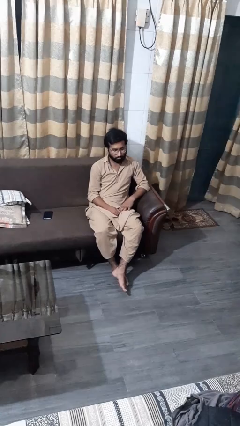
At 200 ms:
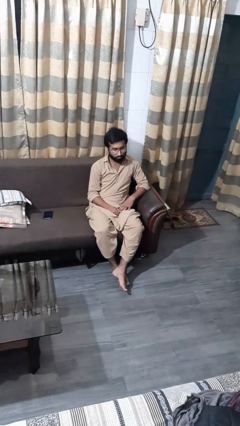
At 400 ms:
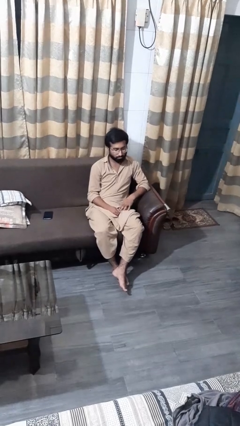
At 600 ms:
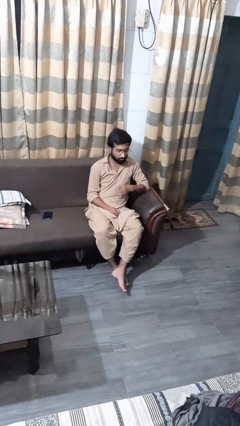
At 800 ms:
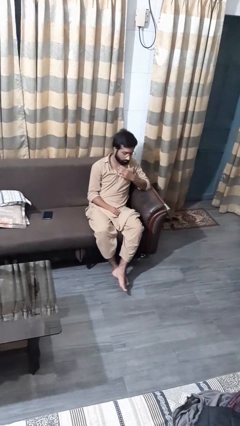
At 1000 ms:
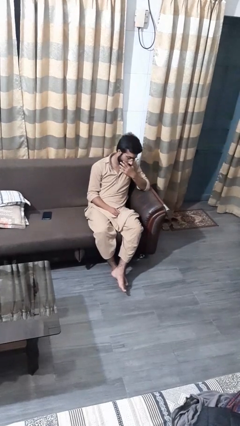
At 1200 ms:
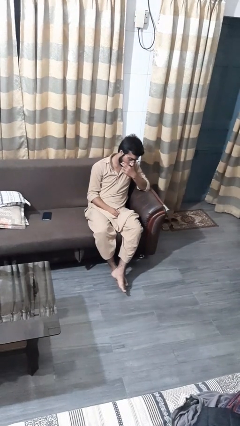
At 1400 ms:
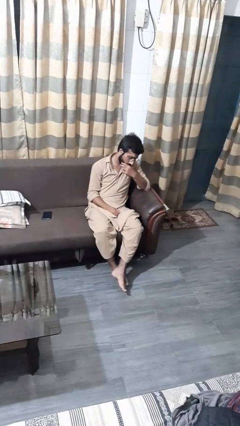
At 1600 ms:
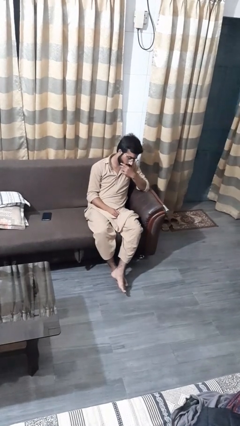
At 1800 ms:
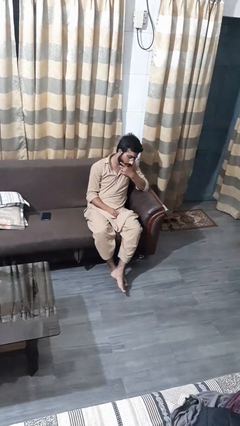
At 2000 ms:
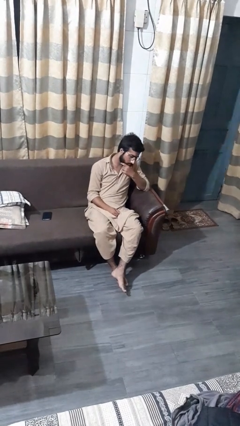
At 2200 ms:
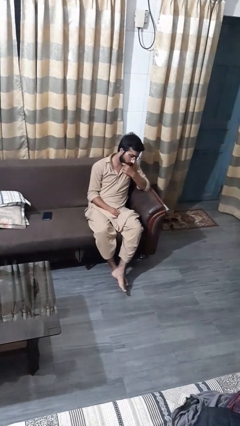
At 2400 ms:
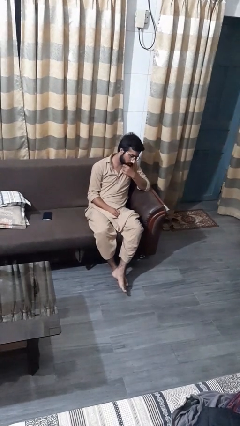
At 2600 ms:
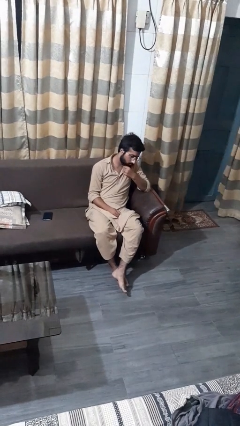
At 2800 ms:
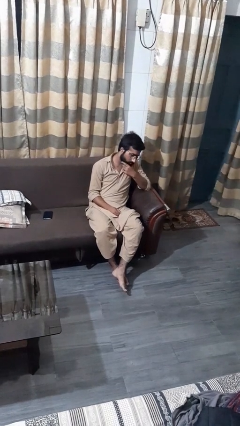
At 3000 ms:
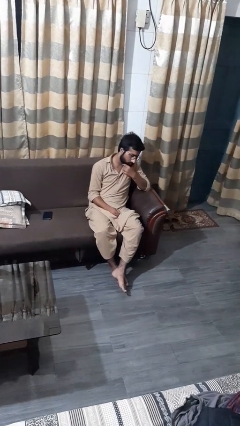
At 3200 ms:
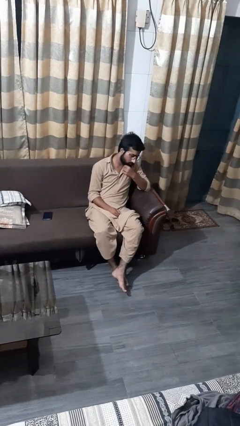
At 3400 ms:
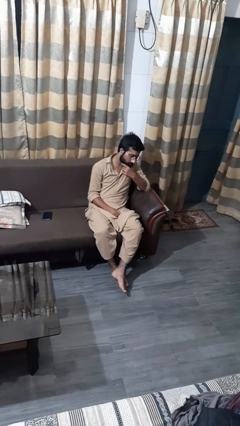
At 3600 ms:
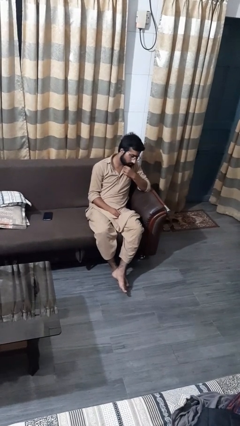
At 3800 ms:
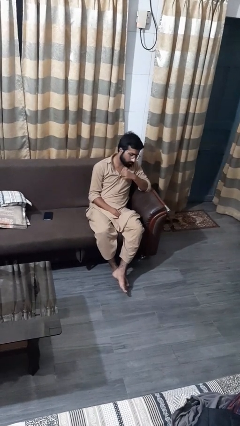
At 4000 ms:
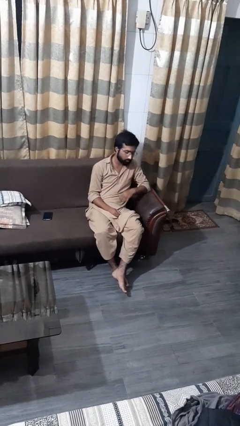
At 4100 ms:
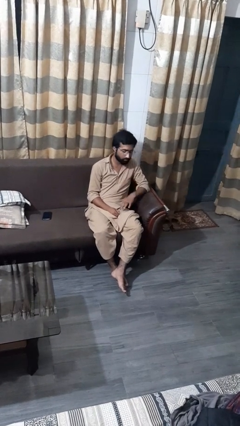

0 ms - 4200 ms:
person strokes chin

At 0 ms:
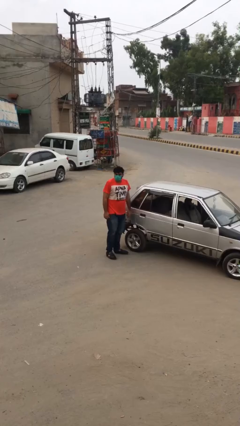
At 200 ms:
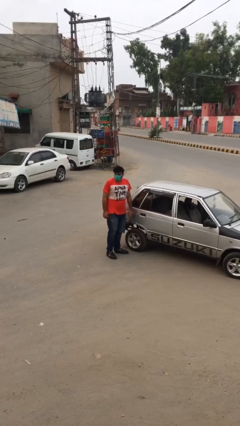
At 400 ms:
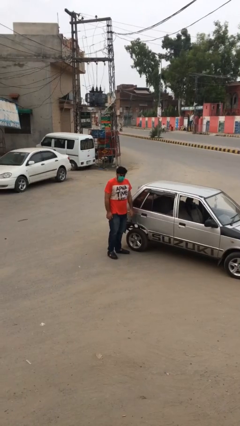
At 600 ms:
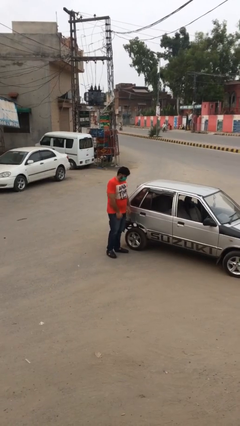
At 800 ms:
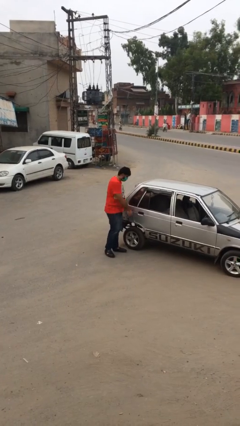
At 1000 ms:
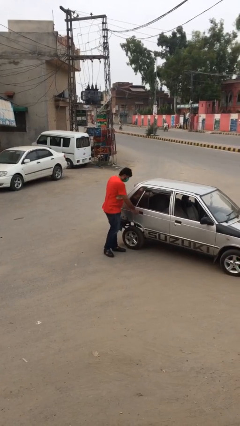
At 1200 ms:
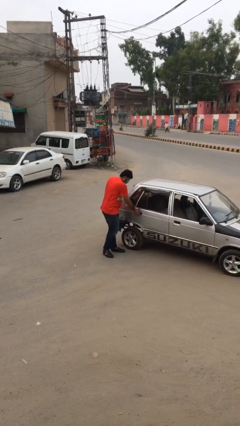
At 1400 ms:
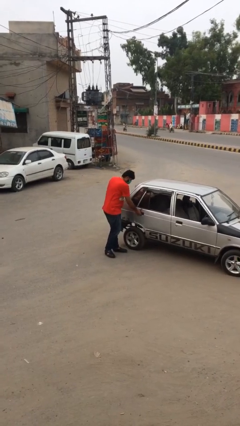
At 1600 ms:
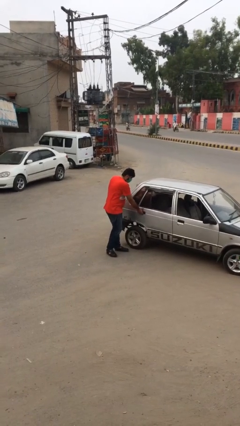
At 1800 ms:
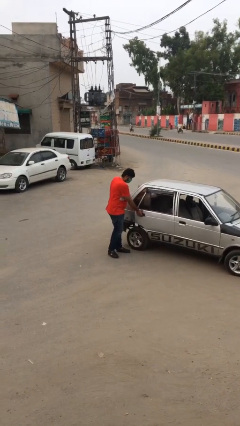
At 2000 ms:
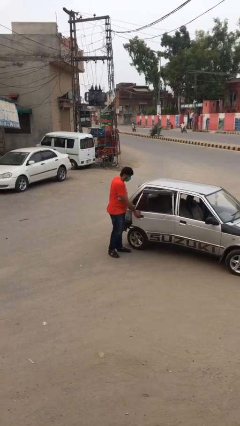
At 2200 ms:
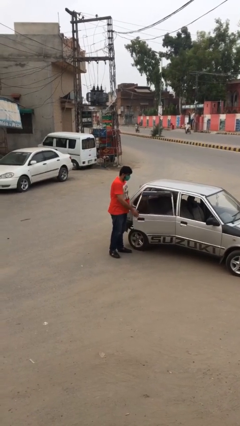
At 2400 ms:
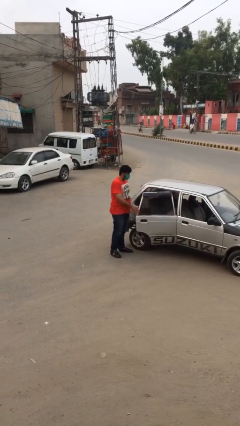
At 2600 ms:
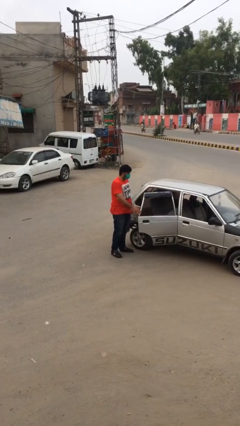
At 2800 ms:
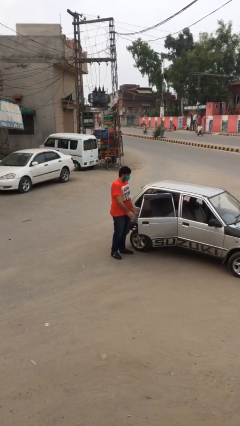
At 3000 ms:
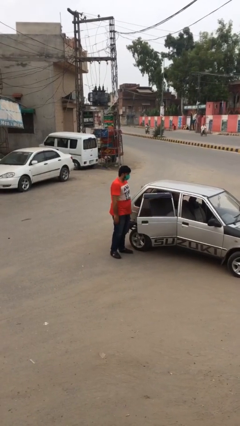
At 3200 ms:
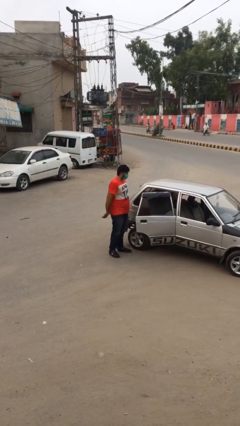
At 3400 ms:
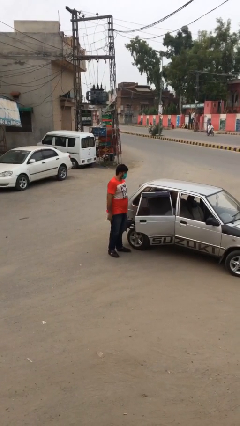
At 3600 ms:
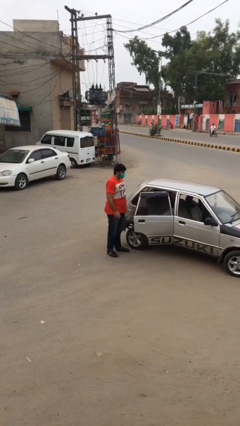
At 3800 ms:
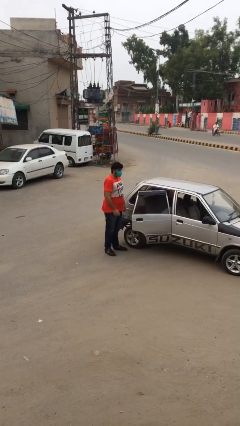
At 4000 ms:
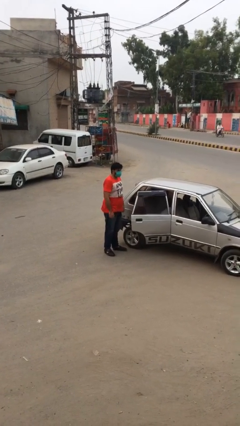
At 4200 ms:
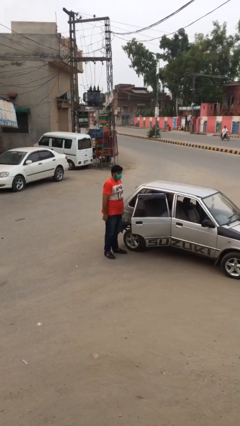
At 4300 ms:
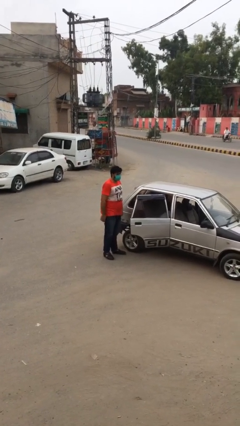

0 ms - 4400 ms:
person opens car door

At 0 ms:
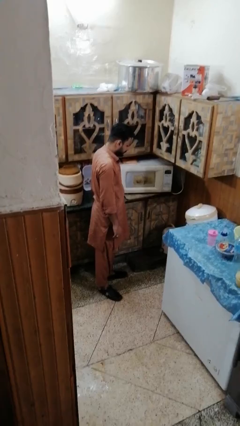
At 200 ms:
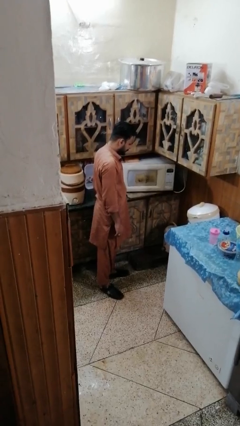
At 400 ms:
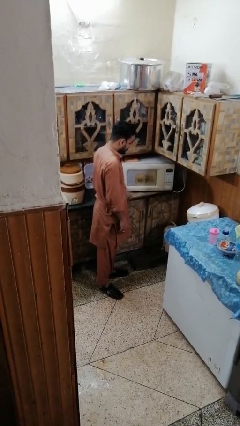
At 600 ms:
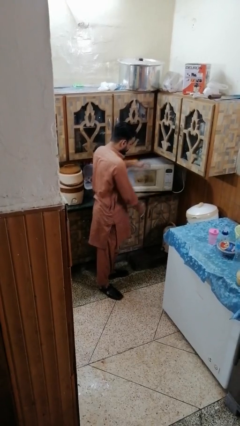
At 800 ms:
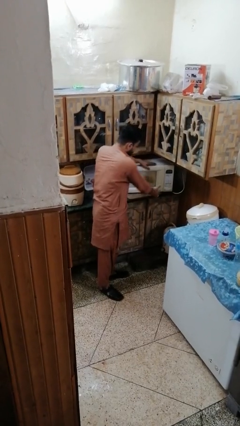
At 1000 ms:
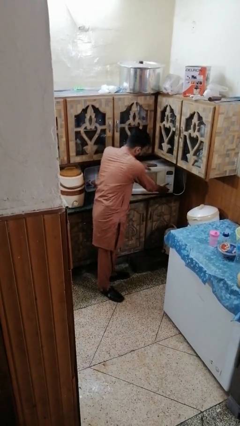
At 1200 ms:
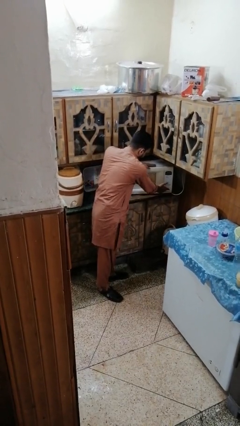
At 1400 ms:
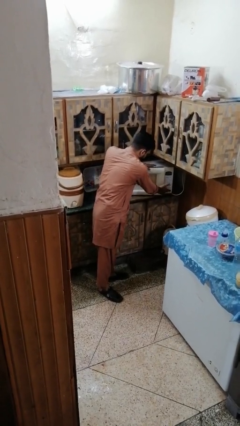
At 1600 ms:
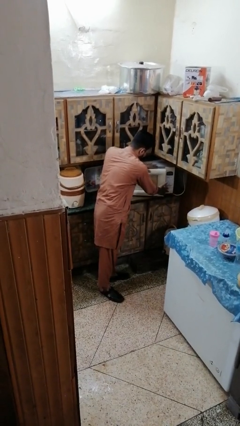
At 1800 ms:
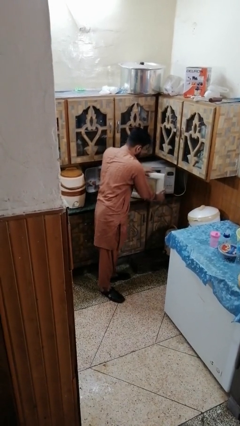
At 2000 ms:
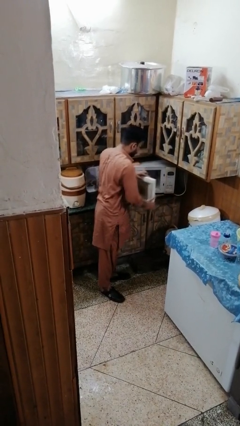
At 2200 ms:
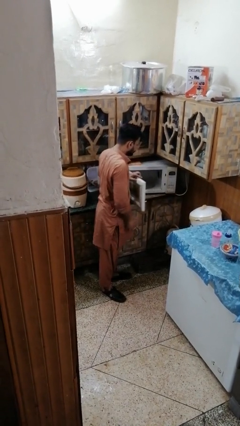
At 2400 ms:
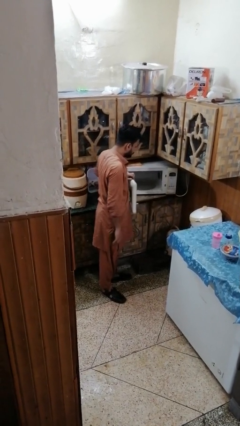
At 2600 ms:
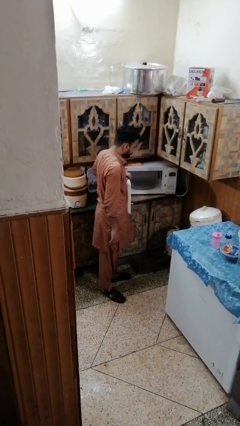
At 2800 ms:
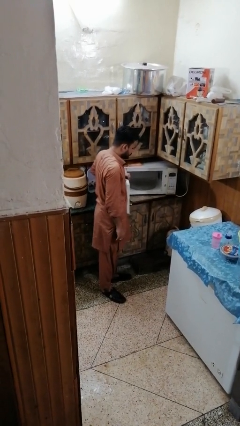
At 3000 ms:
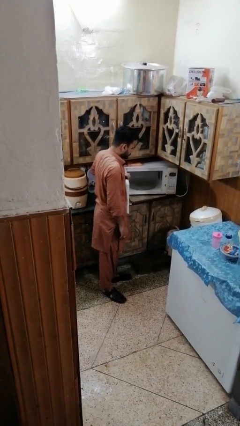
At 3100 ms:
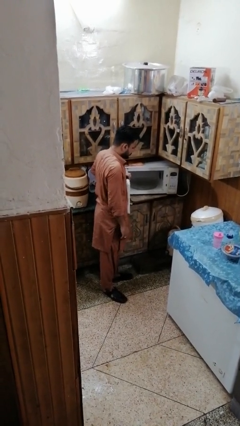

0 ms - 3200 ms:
person opens microwave

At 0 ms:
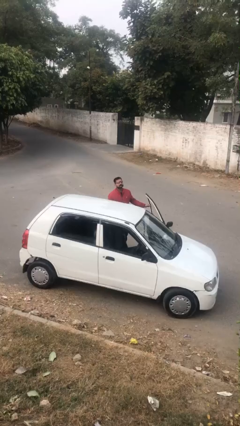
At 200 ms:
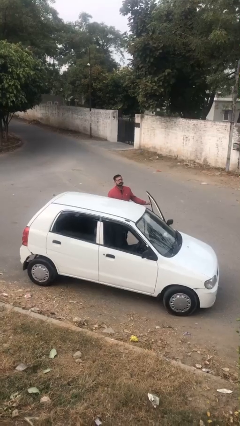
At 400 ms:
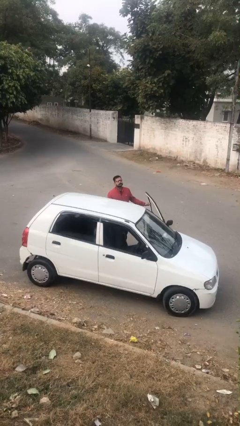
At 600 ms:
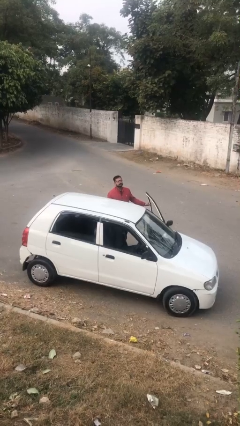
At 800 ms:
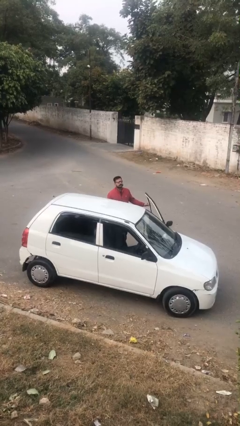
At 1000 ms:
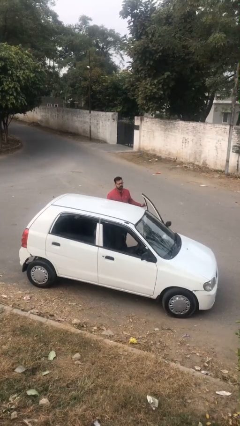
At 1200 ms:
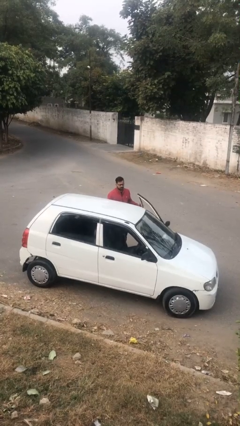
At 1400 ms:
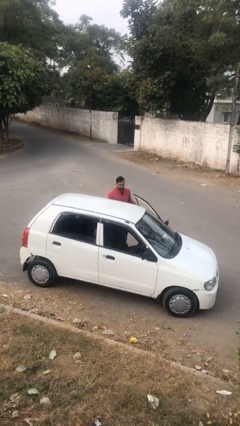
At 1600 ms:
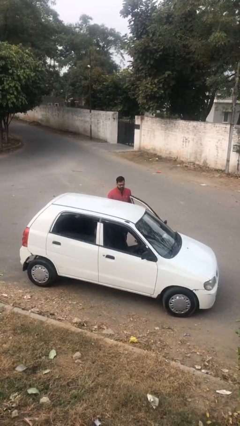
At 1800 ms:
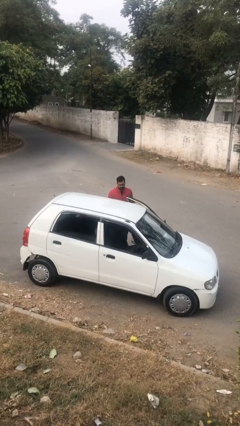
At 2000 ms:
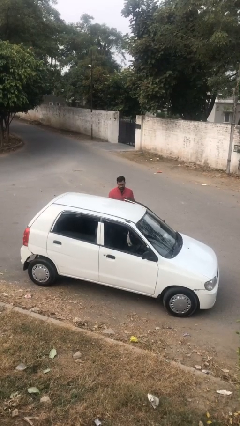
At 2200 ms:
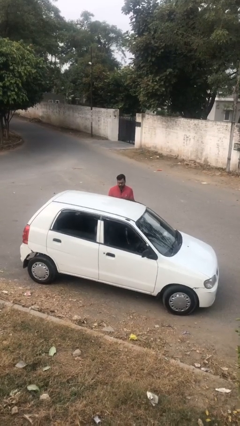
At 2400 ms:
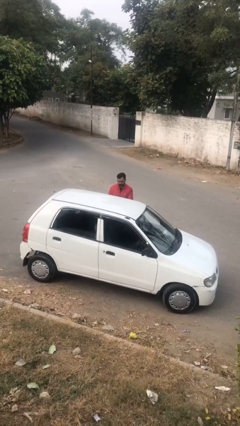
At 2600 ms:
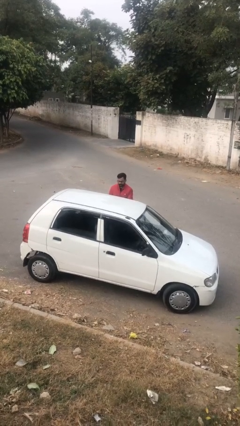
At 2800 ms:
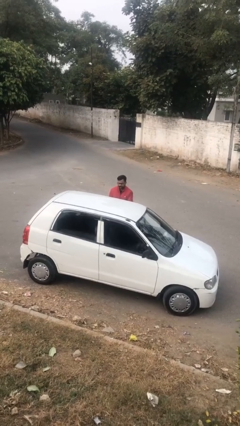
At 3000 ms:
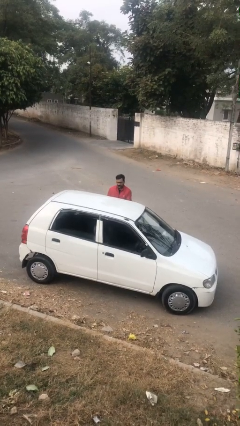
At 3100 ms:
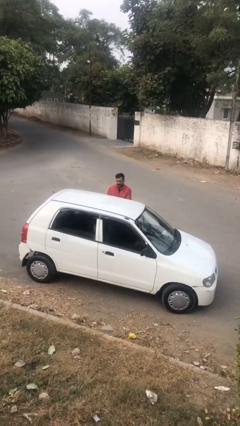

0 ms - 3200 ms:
person closes car door

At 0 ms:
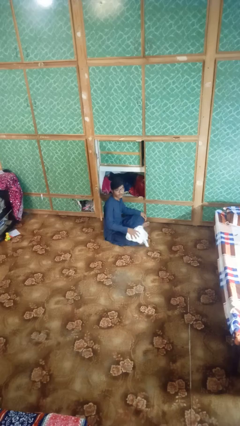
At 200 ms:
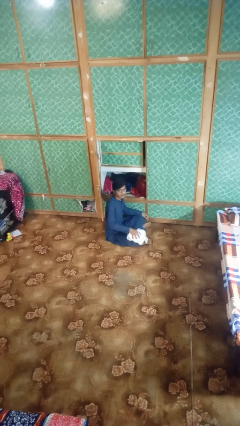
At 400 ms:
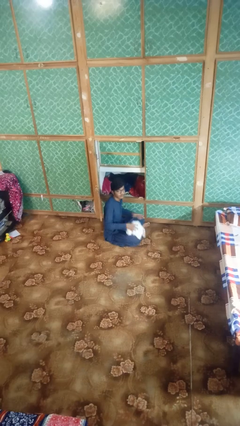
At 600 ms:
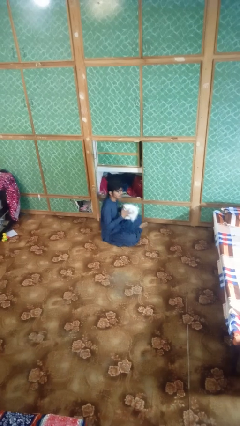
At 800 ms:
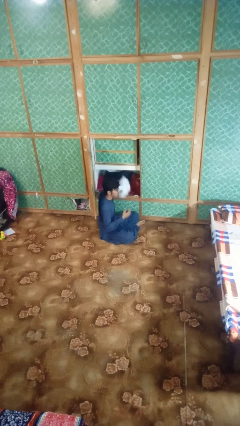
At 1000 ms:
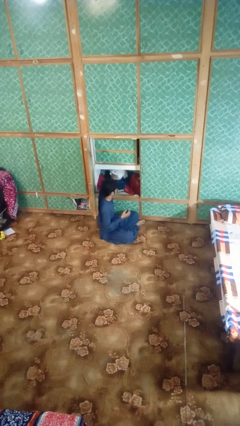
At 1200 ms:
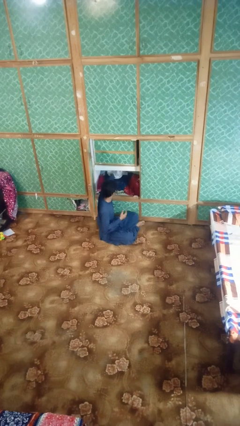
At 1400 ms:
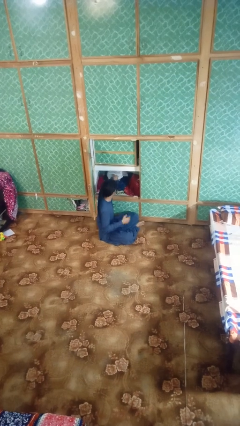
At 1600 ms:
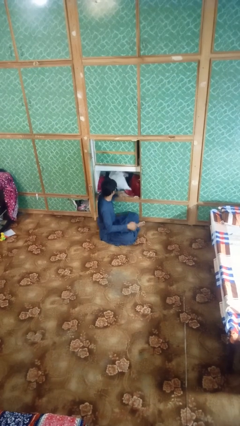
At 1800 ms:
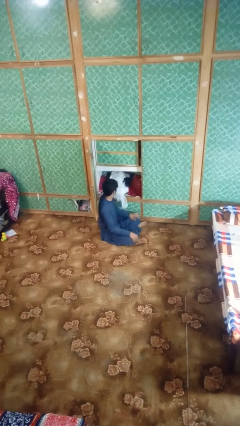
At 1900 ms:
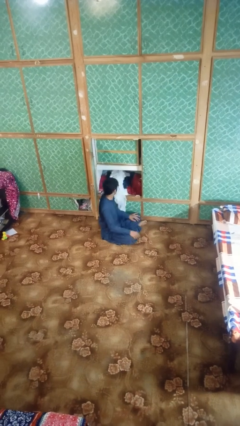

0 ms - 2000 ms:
person puts clothes into dresser

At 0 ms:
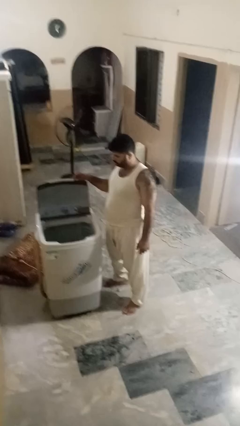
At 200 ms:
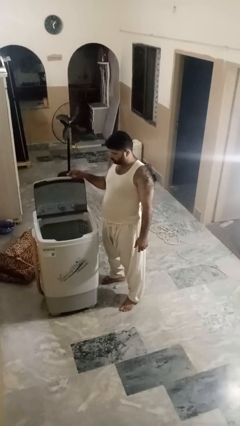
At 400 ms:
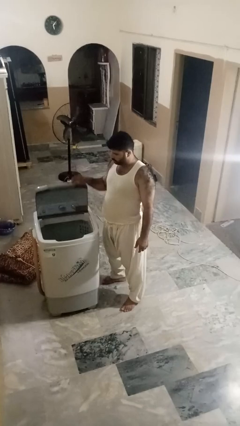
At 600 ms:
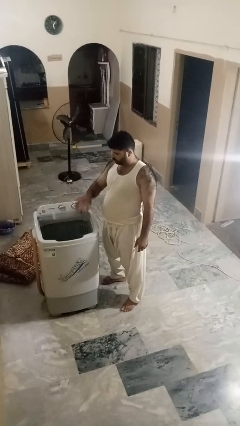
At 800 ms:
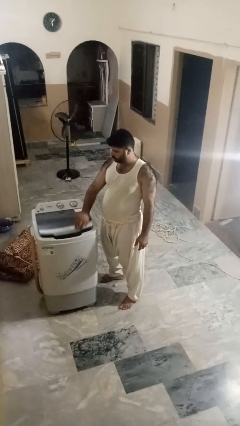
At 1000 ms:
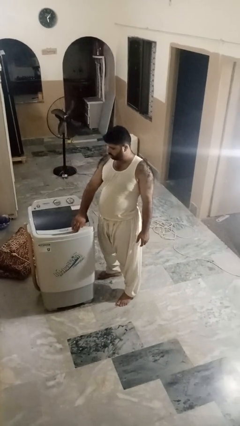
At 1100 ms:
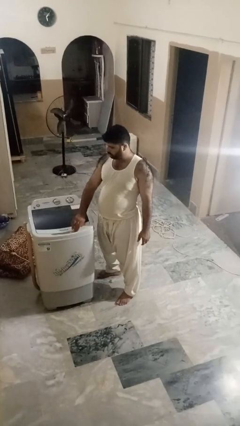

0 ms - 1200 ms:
person closes clothes washer
